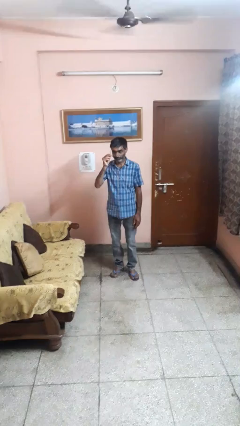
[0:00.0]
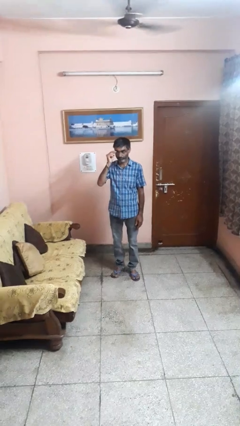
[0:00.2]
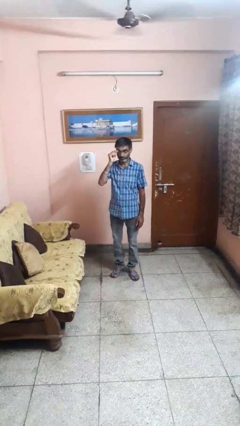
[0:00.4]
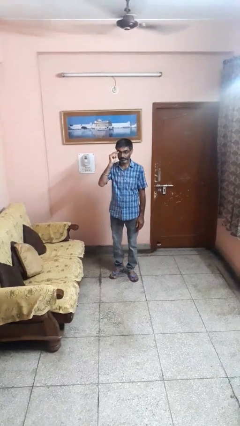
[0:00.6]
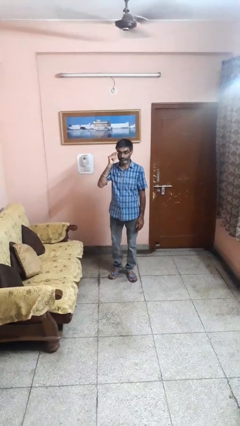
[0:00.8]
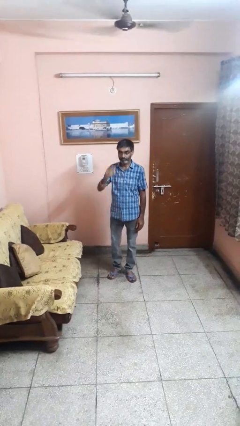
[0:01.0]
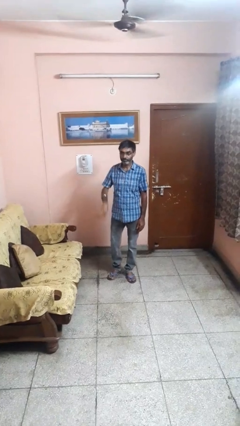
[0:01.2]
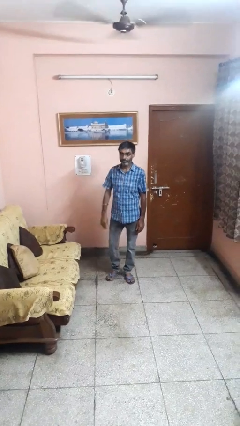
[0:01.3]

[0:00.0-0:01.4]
person puts on glasses

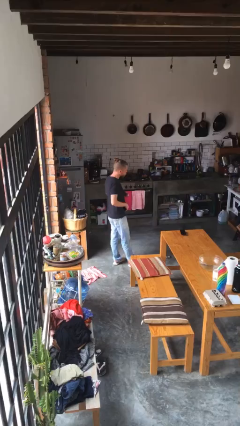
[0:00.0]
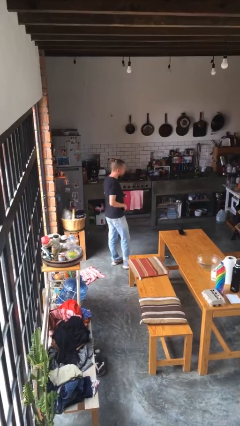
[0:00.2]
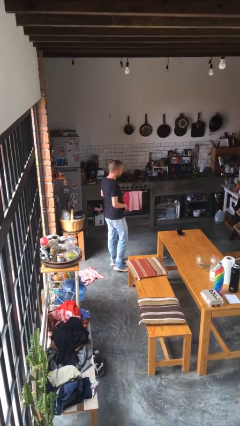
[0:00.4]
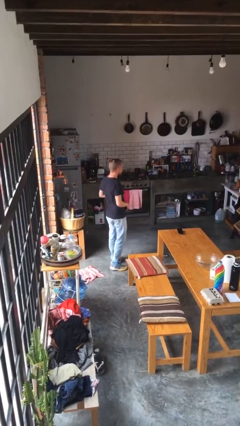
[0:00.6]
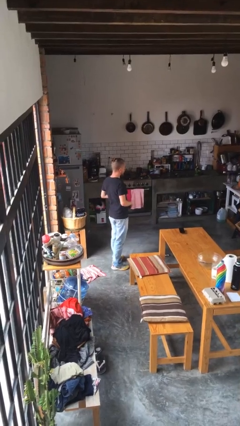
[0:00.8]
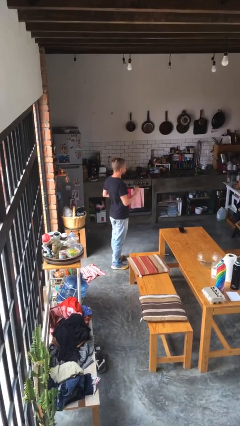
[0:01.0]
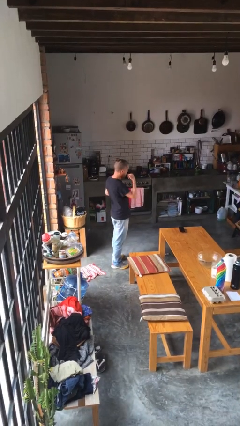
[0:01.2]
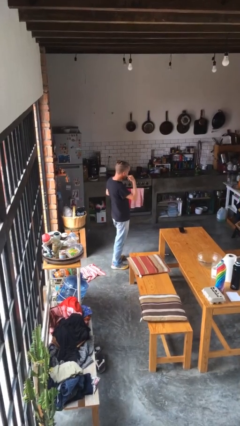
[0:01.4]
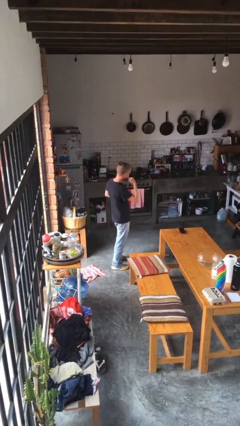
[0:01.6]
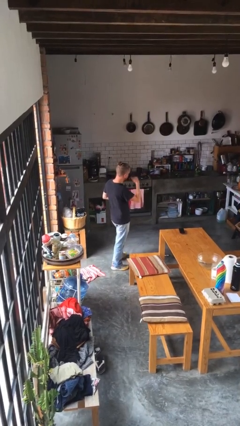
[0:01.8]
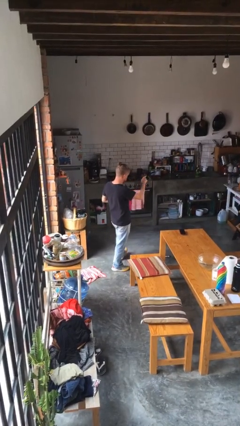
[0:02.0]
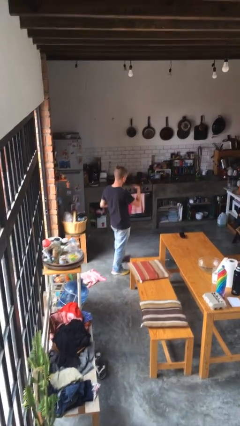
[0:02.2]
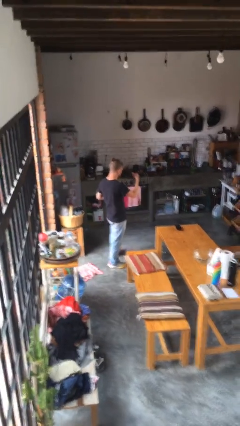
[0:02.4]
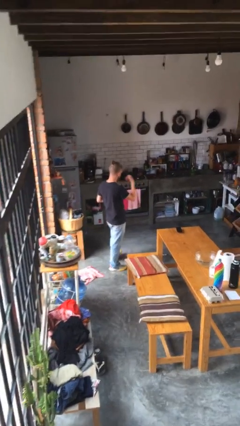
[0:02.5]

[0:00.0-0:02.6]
person gestures call me

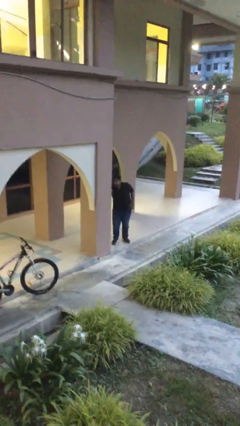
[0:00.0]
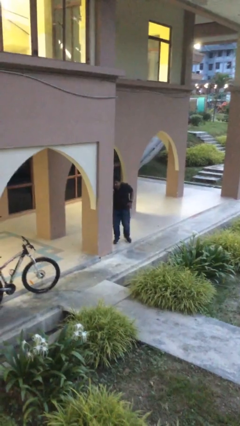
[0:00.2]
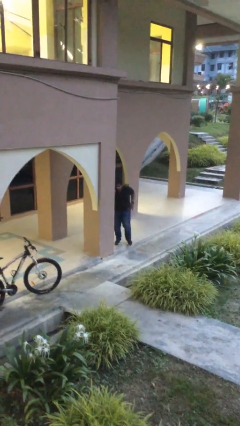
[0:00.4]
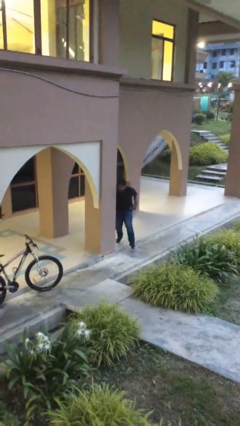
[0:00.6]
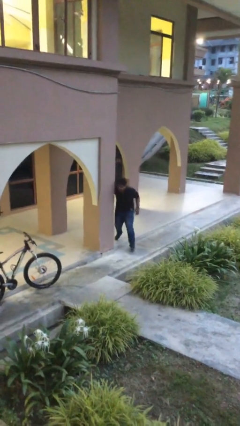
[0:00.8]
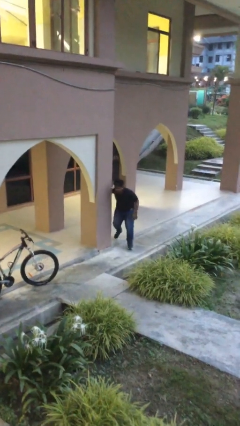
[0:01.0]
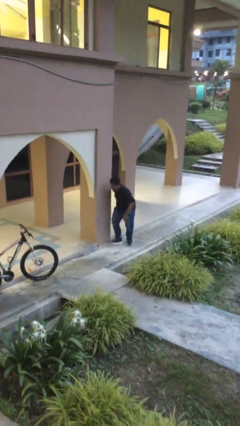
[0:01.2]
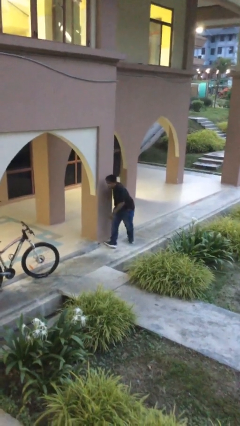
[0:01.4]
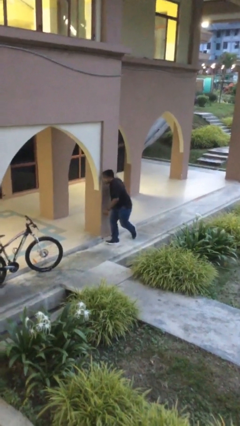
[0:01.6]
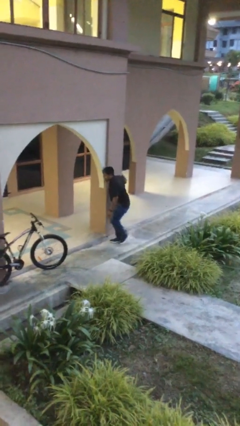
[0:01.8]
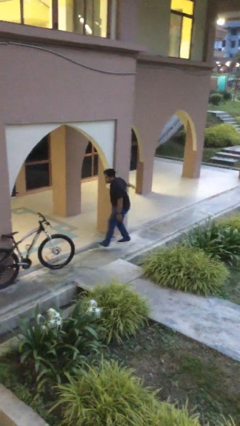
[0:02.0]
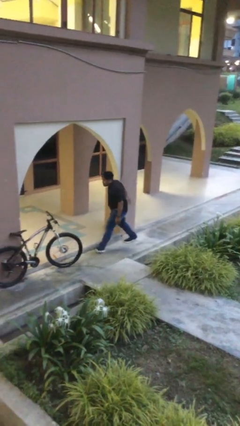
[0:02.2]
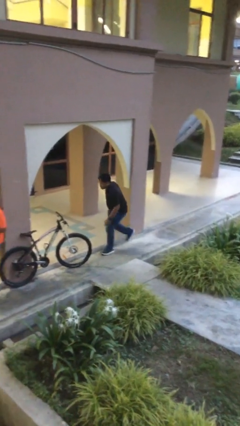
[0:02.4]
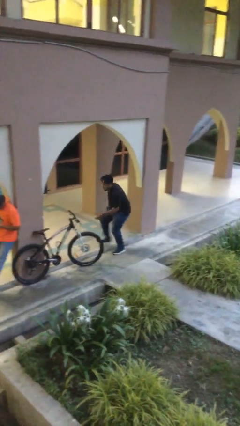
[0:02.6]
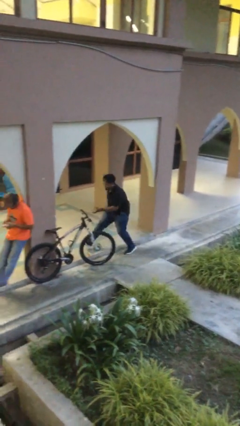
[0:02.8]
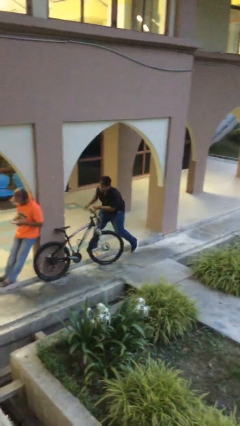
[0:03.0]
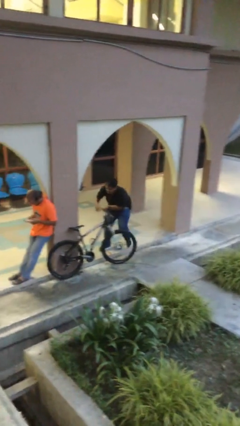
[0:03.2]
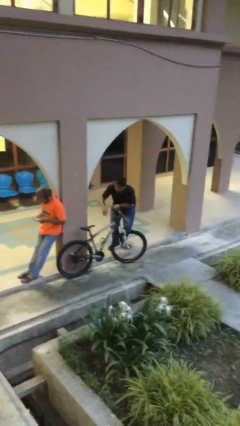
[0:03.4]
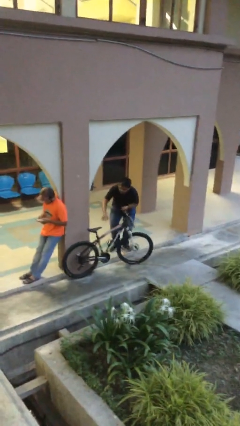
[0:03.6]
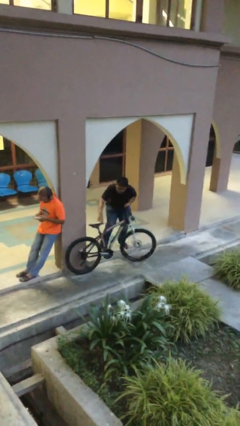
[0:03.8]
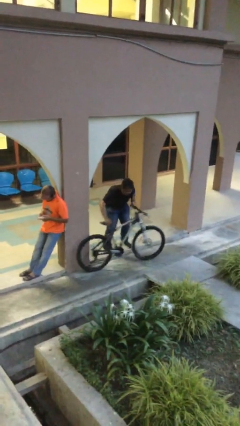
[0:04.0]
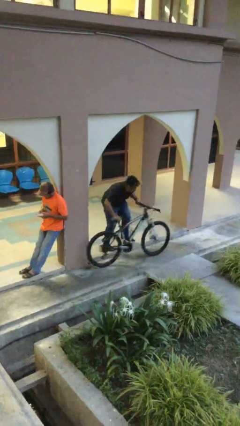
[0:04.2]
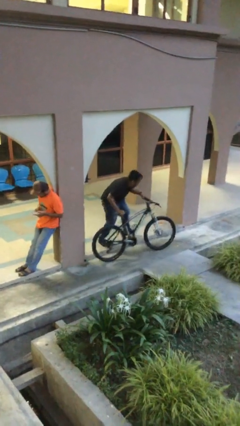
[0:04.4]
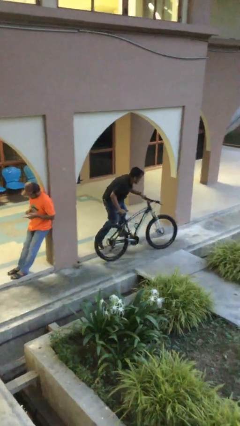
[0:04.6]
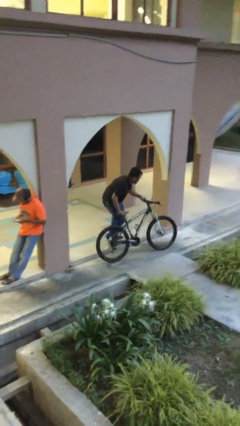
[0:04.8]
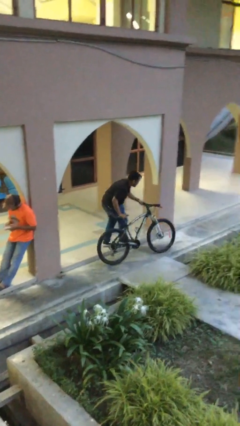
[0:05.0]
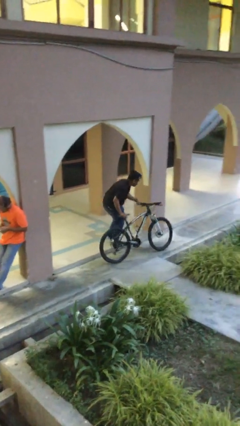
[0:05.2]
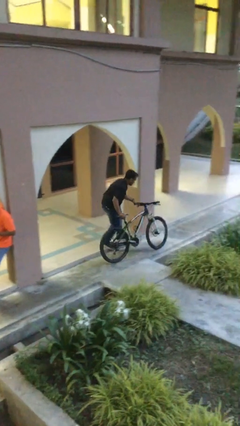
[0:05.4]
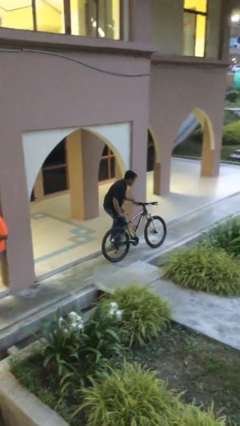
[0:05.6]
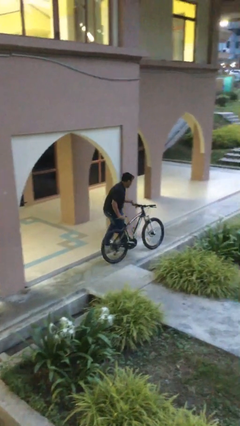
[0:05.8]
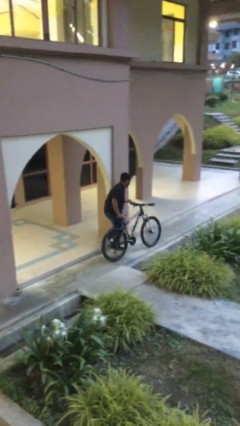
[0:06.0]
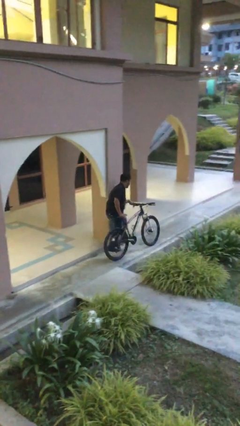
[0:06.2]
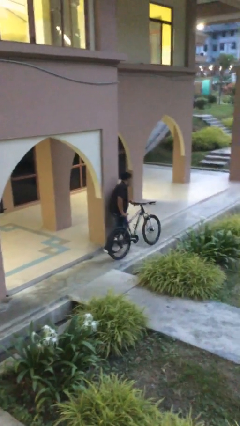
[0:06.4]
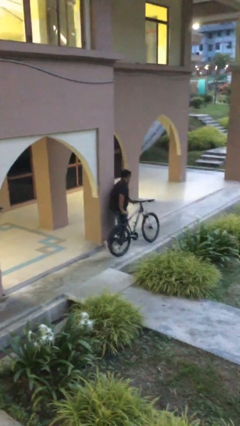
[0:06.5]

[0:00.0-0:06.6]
person steals object from person

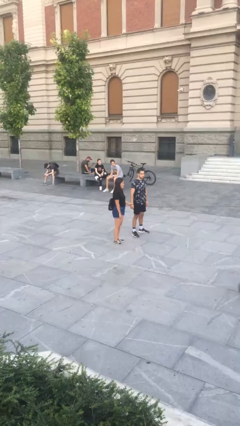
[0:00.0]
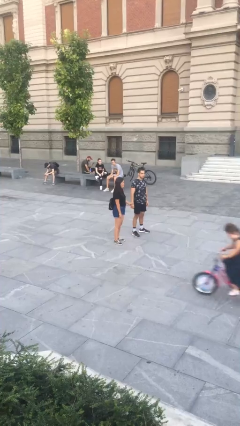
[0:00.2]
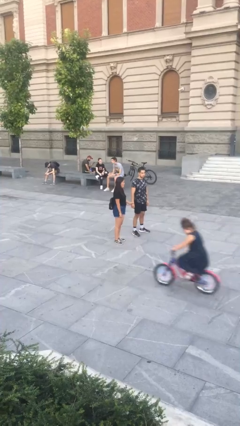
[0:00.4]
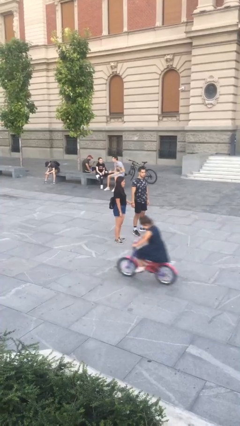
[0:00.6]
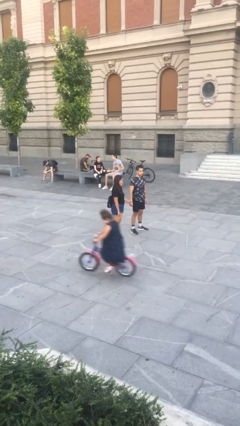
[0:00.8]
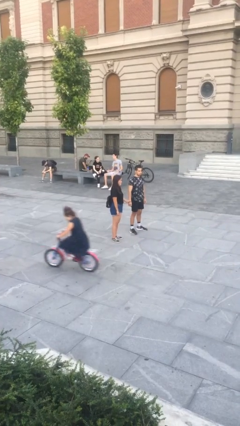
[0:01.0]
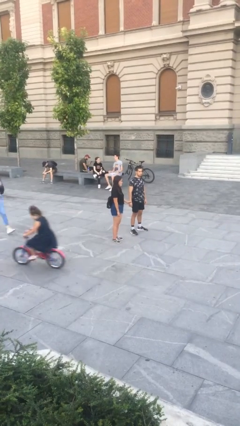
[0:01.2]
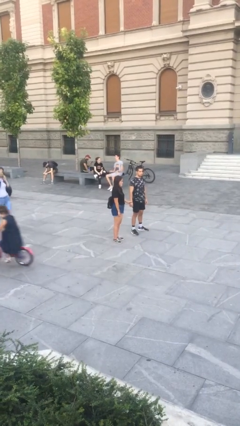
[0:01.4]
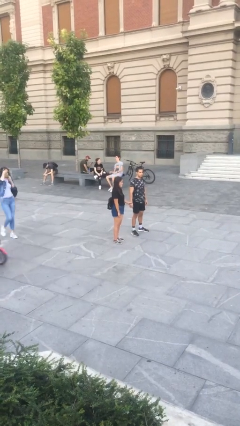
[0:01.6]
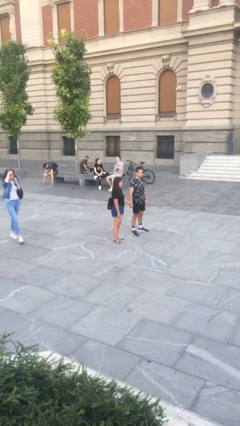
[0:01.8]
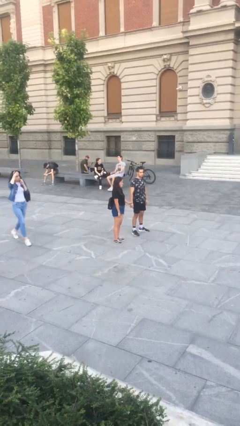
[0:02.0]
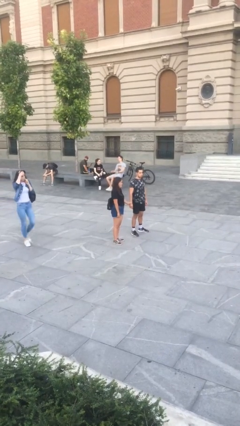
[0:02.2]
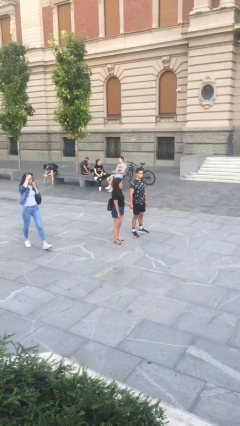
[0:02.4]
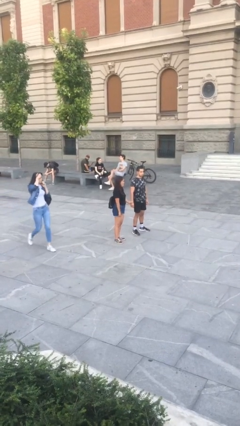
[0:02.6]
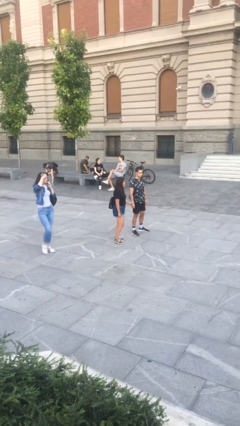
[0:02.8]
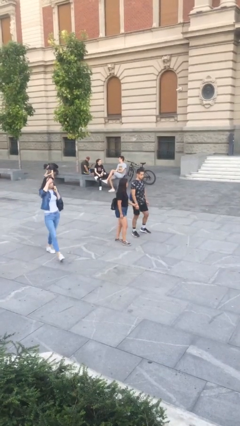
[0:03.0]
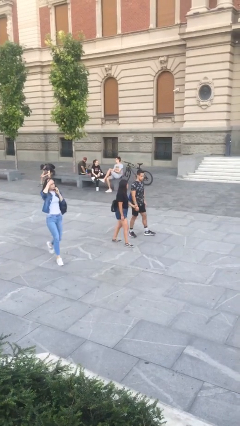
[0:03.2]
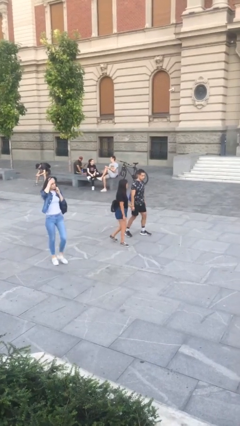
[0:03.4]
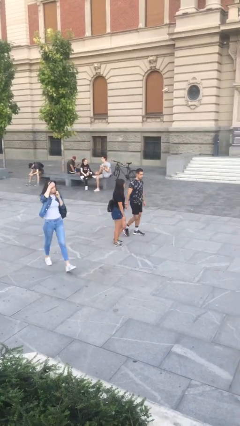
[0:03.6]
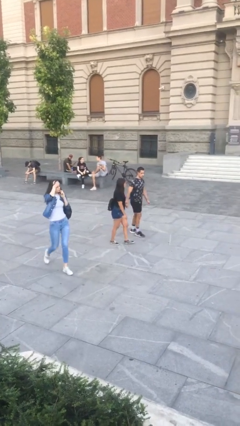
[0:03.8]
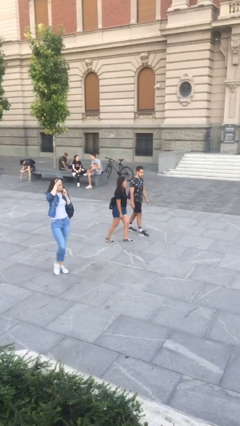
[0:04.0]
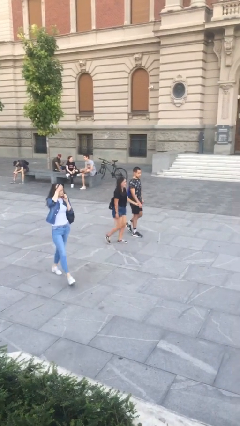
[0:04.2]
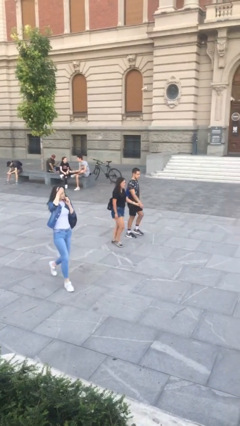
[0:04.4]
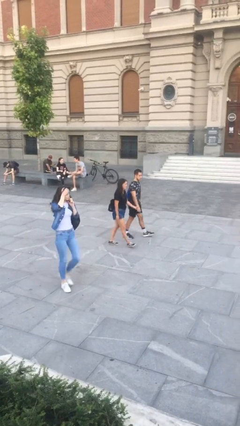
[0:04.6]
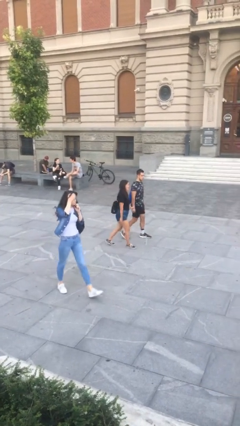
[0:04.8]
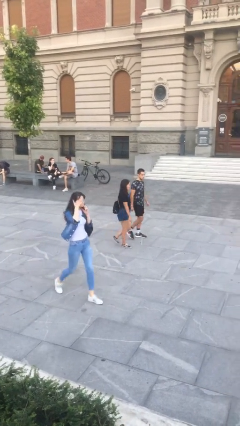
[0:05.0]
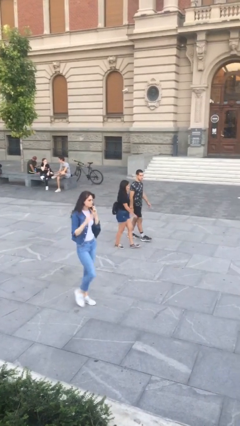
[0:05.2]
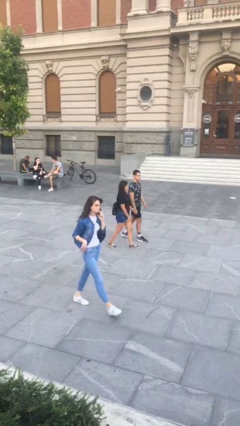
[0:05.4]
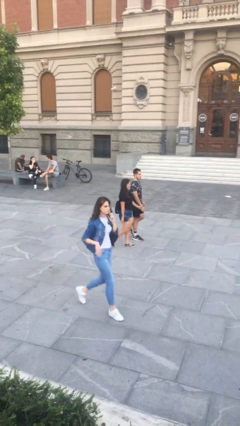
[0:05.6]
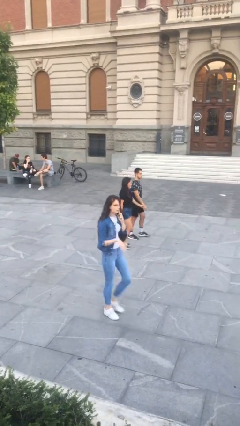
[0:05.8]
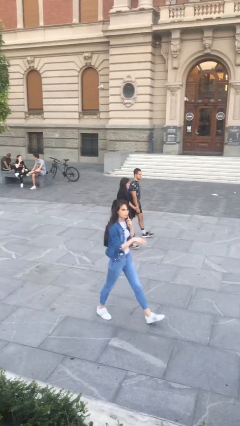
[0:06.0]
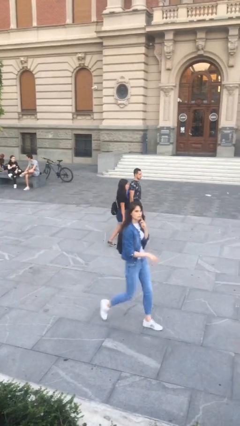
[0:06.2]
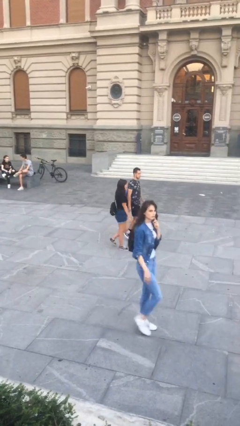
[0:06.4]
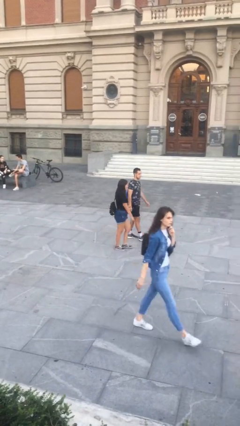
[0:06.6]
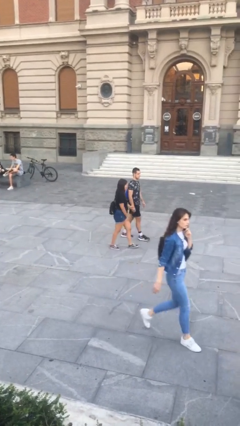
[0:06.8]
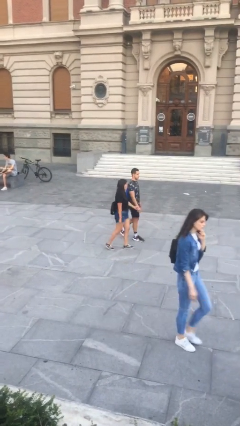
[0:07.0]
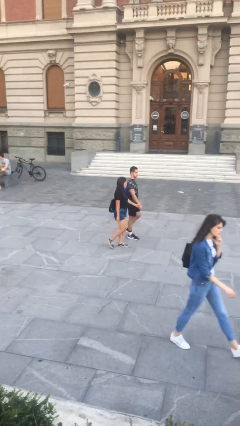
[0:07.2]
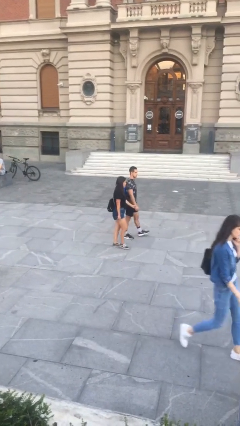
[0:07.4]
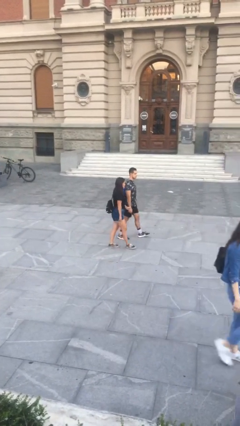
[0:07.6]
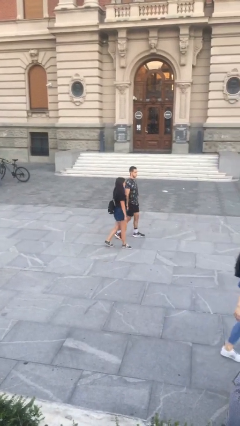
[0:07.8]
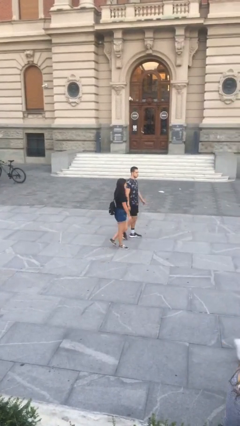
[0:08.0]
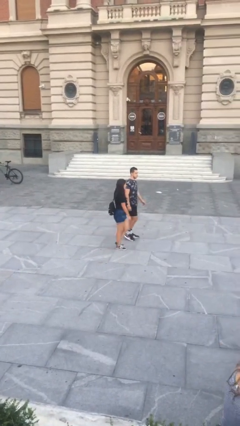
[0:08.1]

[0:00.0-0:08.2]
person holds hand
